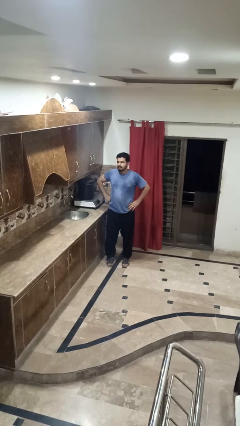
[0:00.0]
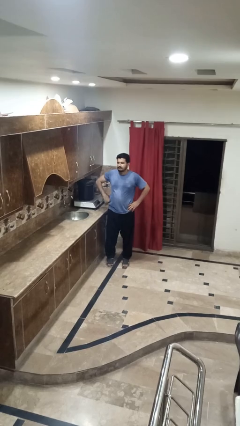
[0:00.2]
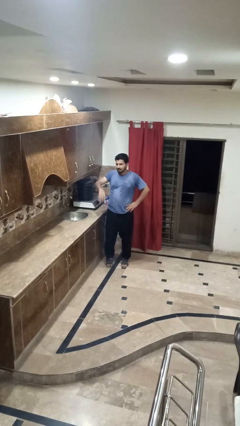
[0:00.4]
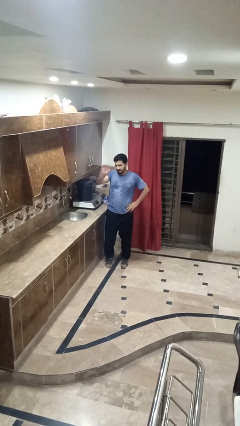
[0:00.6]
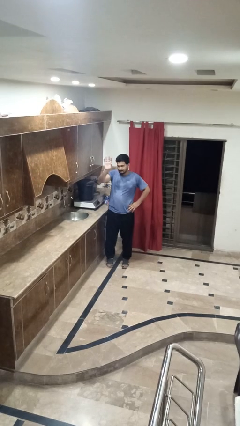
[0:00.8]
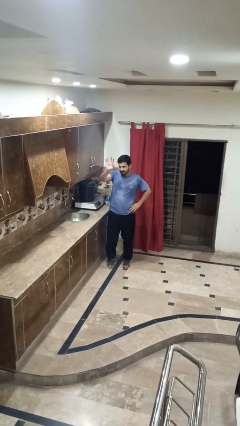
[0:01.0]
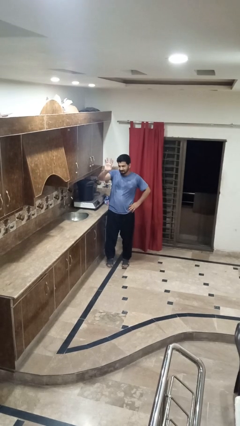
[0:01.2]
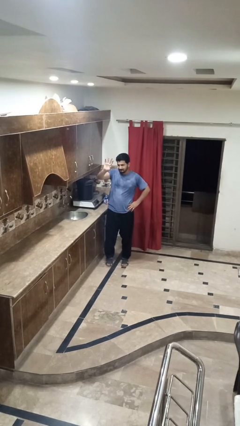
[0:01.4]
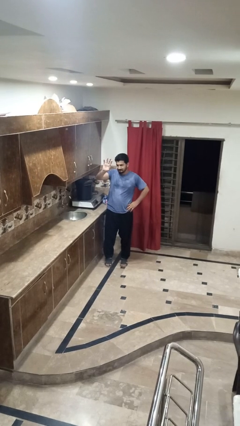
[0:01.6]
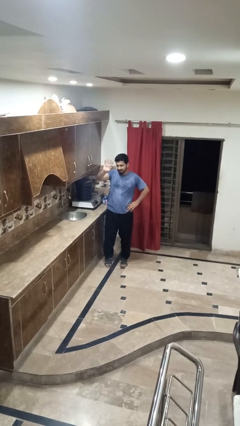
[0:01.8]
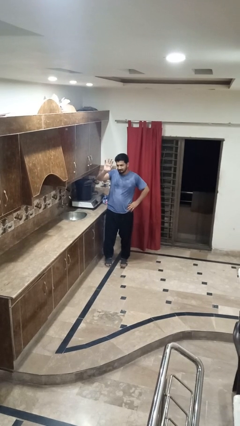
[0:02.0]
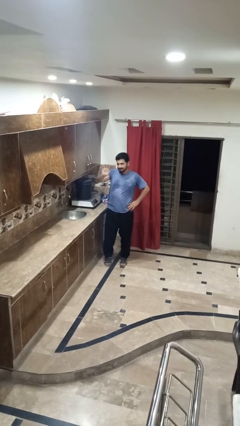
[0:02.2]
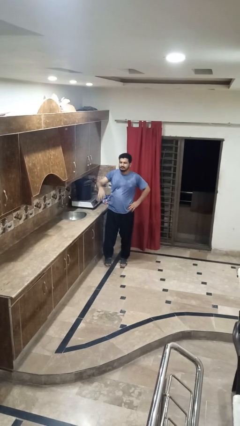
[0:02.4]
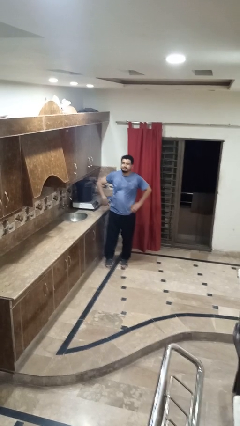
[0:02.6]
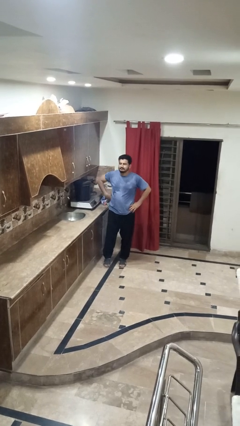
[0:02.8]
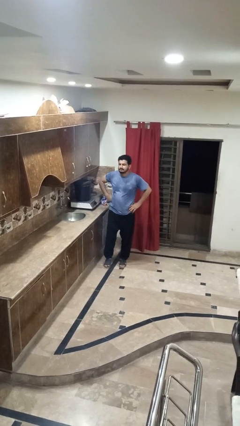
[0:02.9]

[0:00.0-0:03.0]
person waves at person

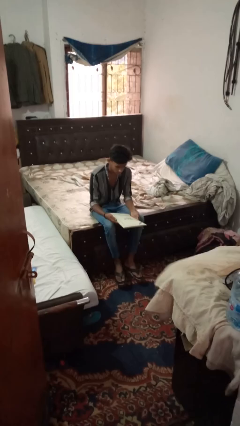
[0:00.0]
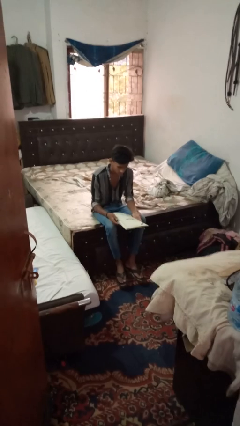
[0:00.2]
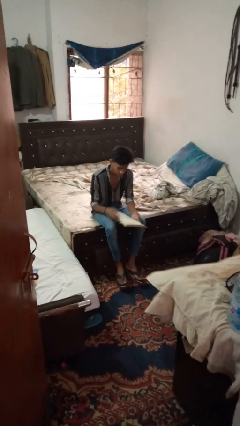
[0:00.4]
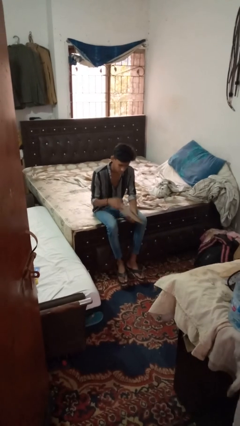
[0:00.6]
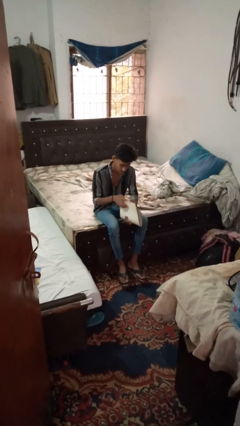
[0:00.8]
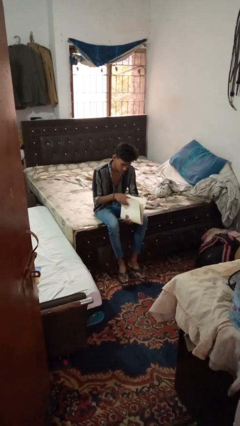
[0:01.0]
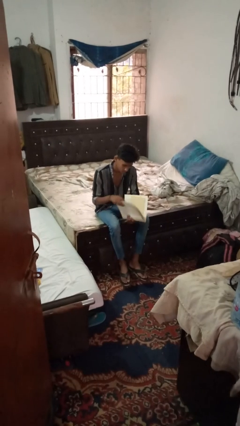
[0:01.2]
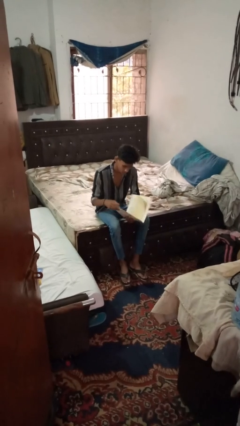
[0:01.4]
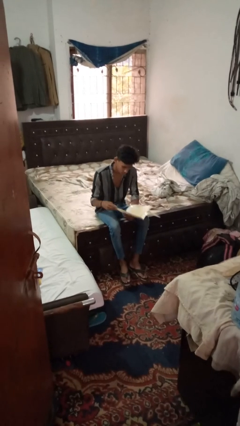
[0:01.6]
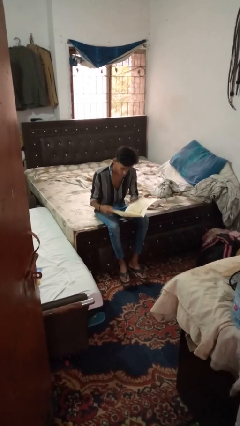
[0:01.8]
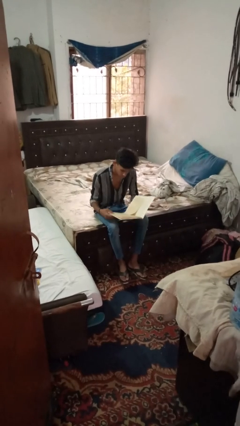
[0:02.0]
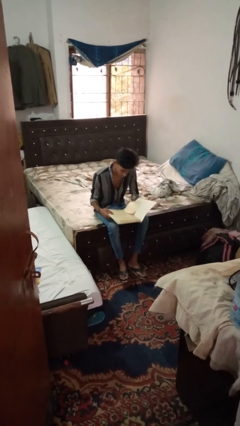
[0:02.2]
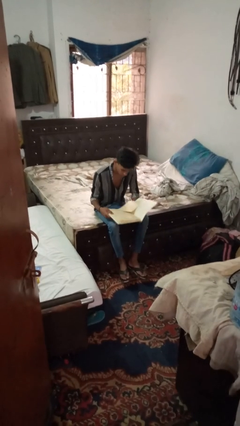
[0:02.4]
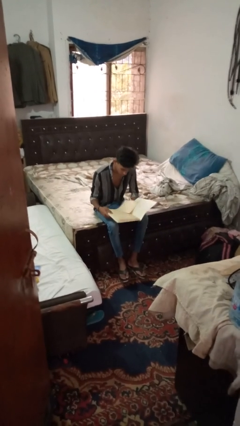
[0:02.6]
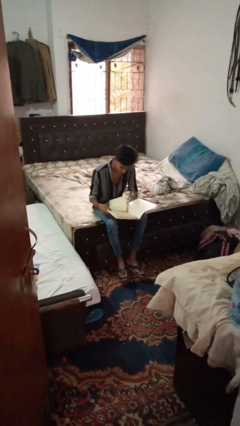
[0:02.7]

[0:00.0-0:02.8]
person reads magazine

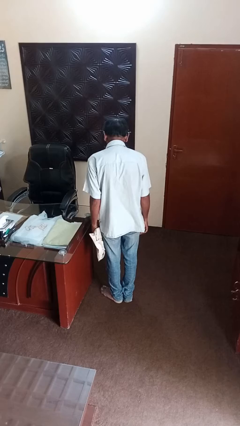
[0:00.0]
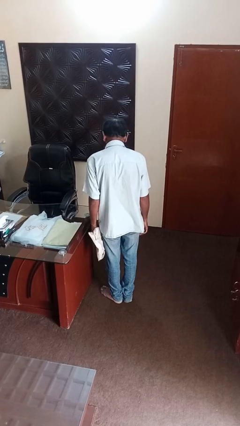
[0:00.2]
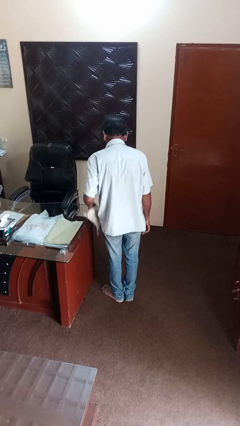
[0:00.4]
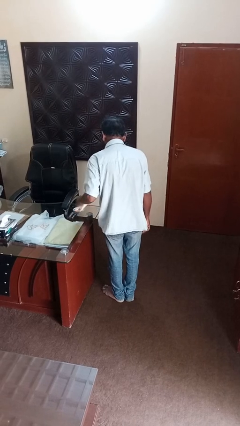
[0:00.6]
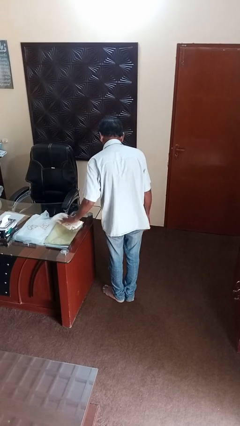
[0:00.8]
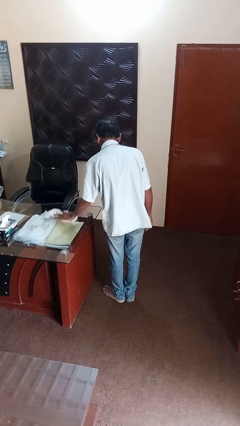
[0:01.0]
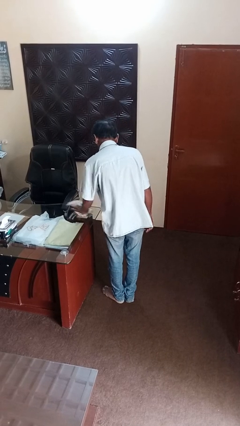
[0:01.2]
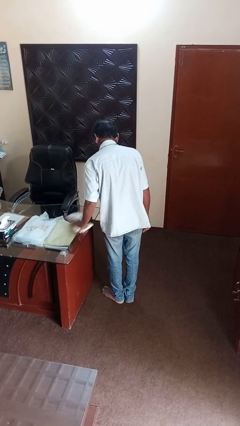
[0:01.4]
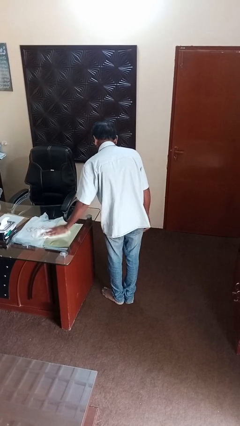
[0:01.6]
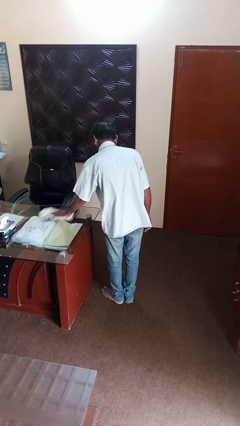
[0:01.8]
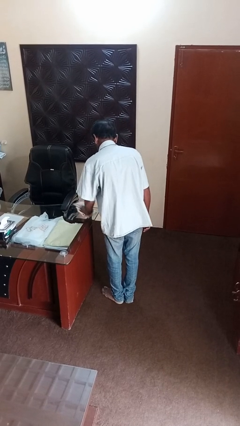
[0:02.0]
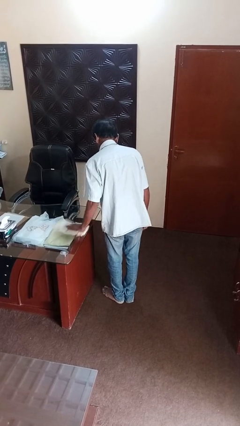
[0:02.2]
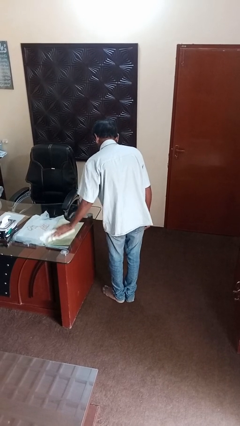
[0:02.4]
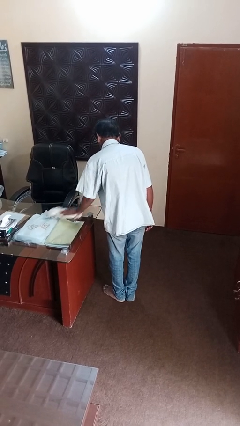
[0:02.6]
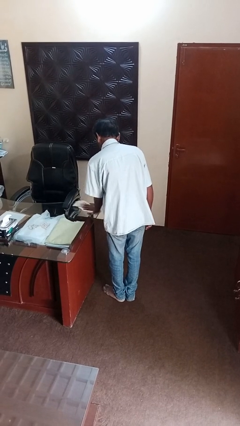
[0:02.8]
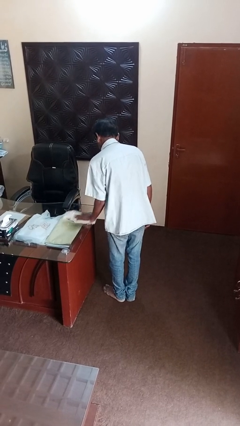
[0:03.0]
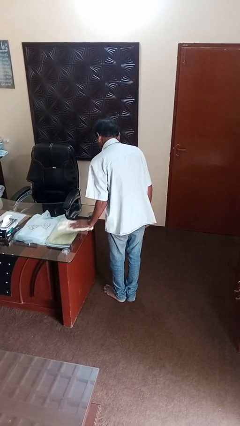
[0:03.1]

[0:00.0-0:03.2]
person cleans table with rag

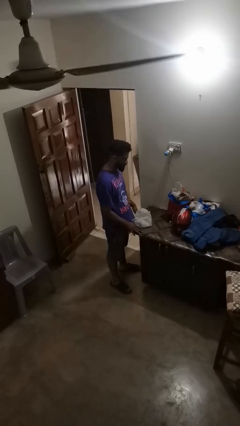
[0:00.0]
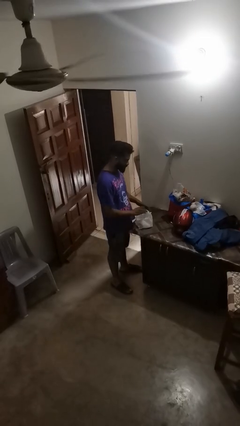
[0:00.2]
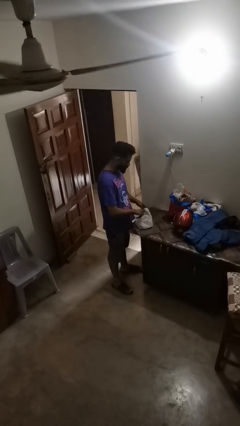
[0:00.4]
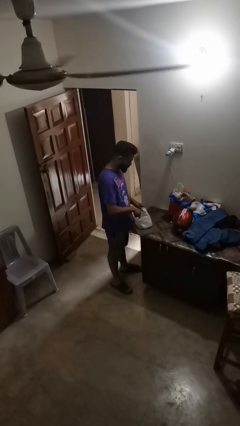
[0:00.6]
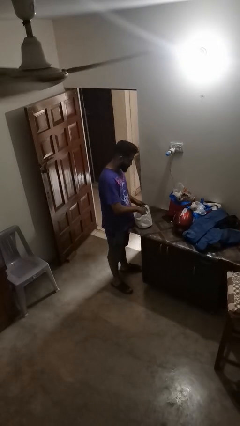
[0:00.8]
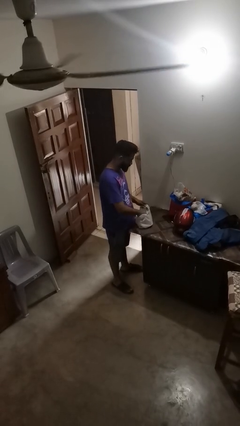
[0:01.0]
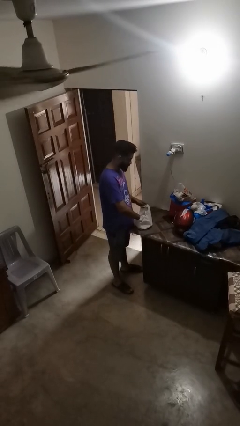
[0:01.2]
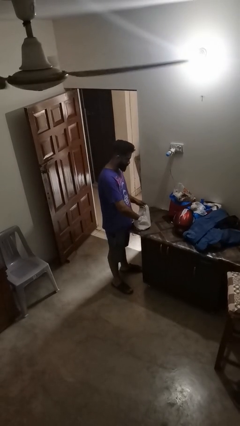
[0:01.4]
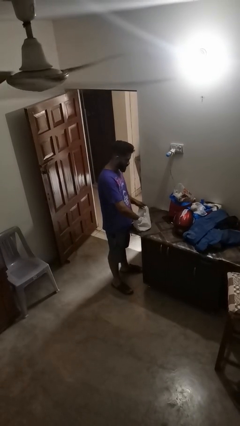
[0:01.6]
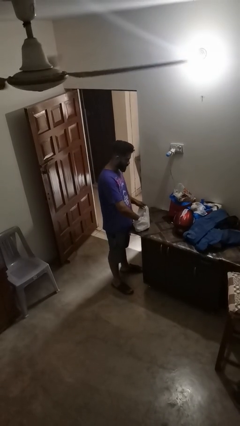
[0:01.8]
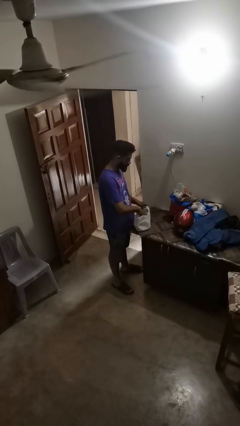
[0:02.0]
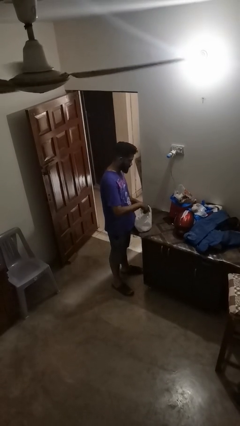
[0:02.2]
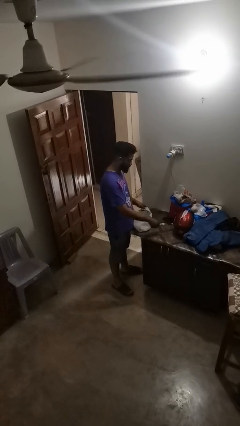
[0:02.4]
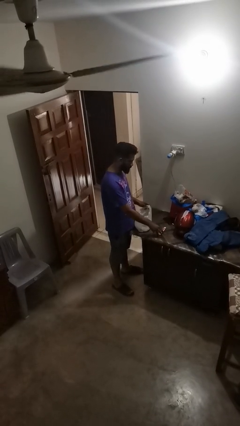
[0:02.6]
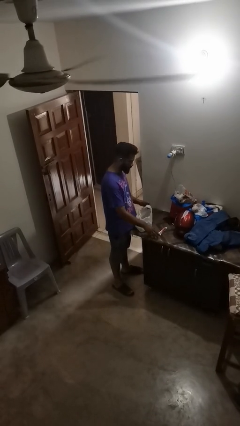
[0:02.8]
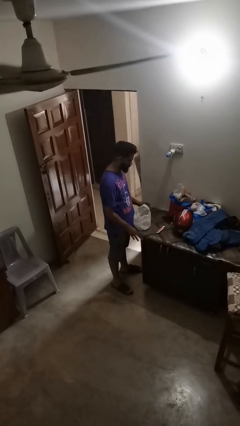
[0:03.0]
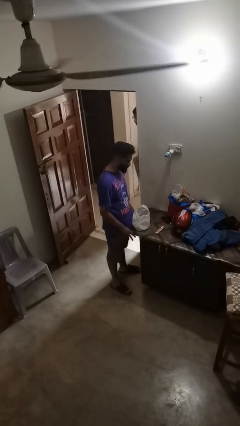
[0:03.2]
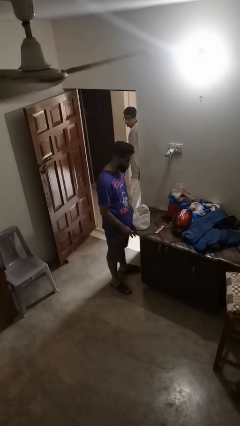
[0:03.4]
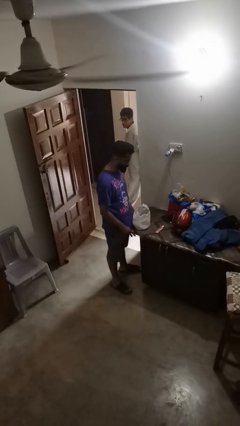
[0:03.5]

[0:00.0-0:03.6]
person takes object from bag

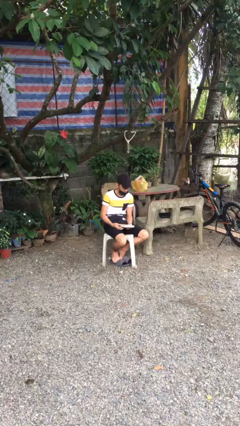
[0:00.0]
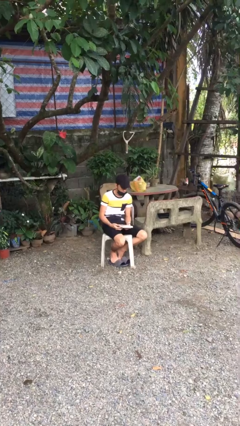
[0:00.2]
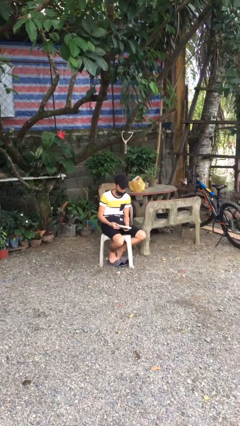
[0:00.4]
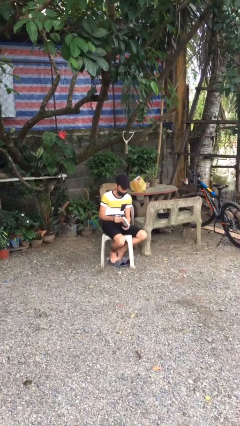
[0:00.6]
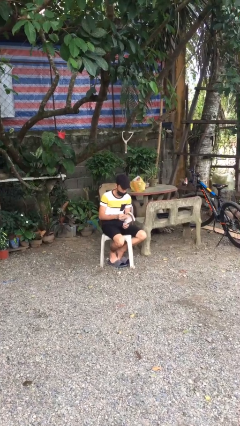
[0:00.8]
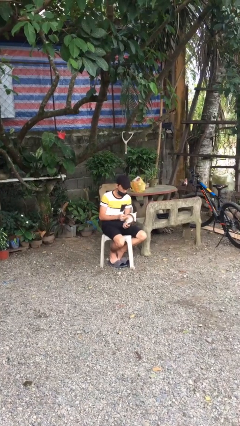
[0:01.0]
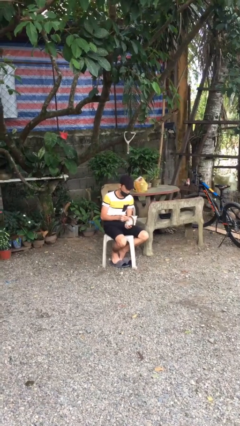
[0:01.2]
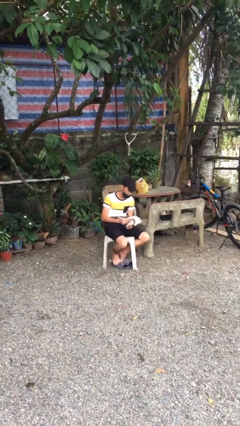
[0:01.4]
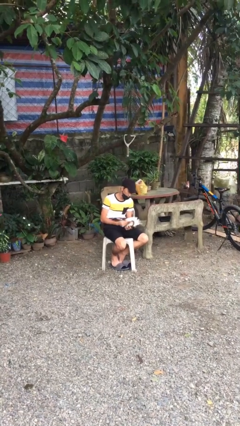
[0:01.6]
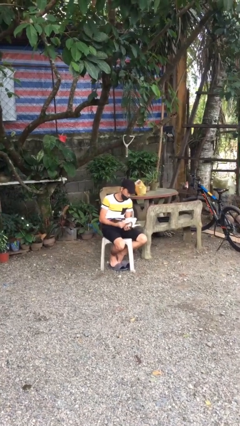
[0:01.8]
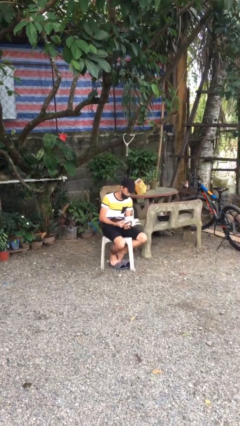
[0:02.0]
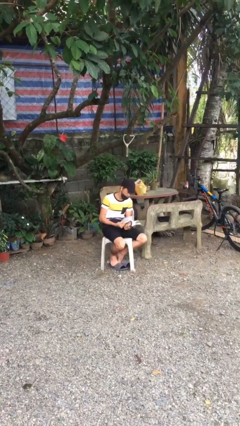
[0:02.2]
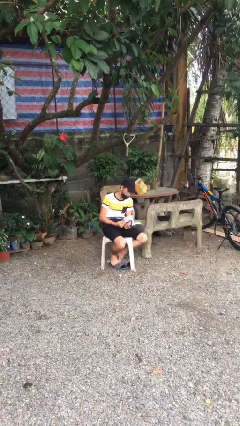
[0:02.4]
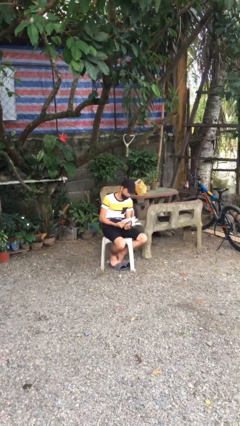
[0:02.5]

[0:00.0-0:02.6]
person reads document

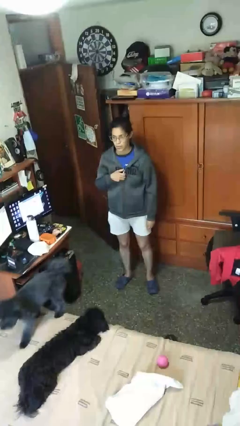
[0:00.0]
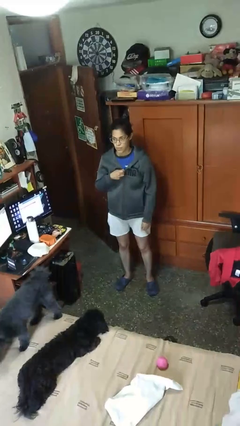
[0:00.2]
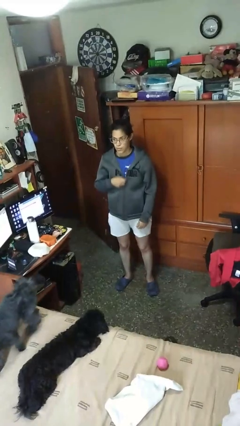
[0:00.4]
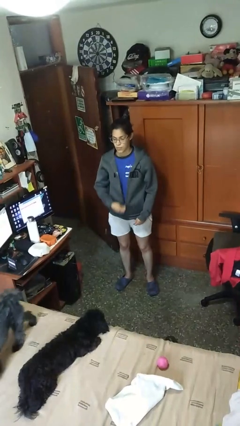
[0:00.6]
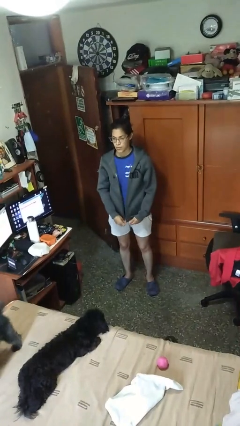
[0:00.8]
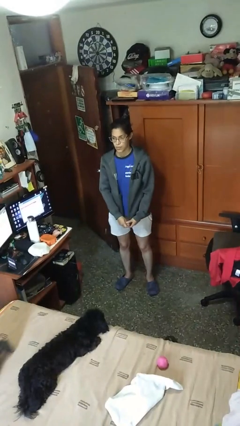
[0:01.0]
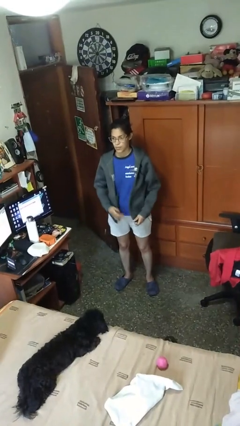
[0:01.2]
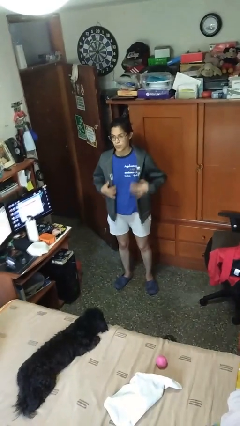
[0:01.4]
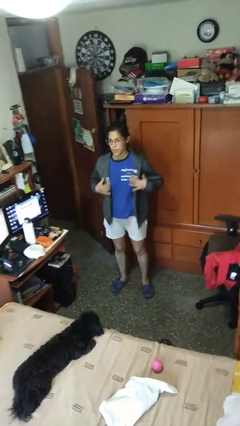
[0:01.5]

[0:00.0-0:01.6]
person unzips jacket

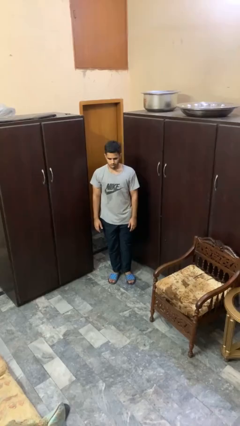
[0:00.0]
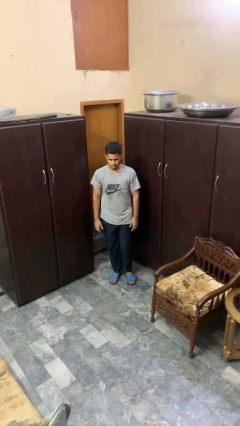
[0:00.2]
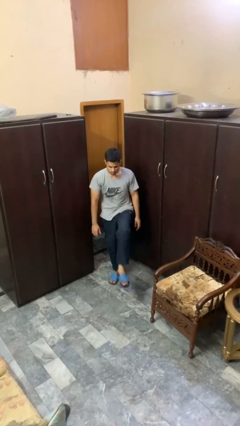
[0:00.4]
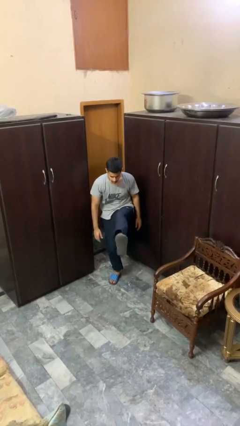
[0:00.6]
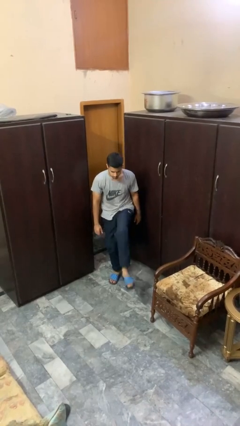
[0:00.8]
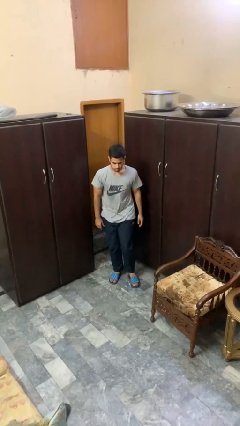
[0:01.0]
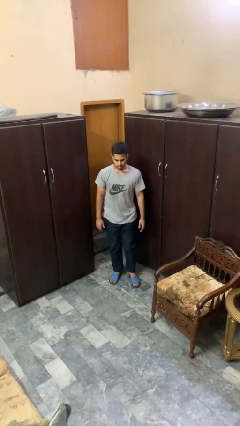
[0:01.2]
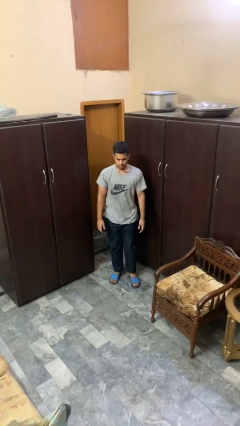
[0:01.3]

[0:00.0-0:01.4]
person karate kicks
